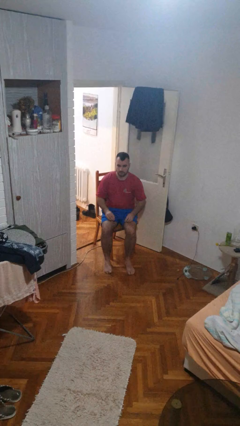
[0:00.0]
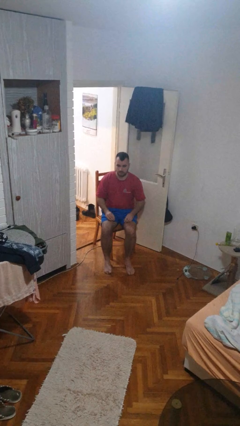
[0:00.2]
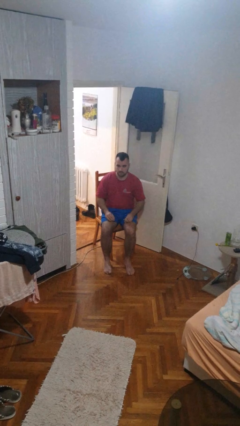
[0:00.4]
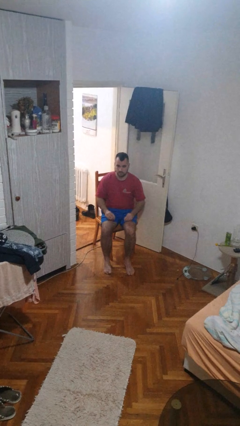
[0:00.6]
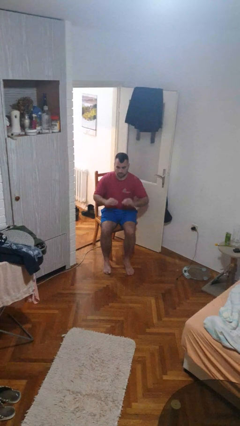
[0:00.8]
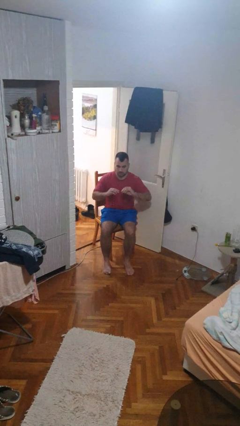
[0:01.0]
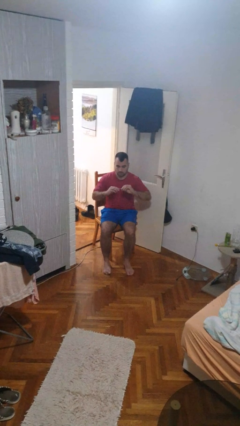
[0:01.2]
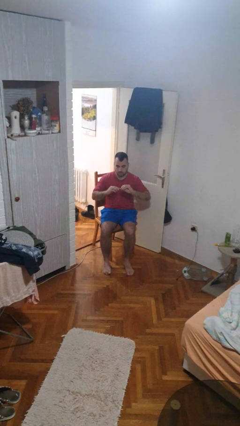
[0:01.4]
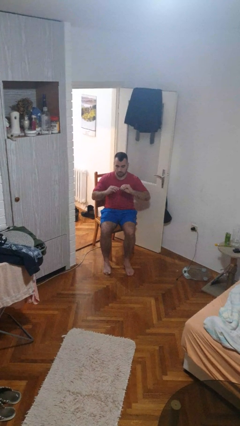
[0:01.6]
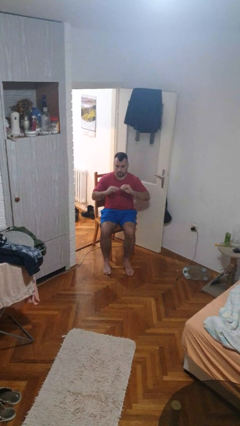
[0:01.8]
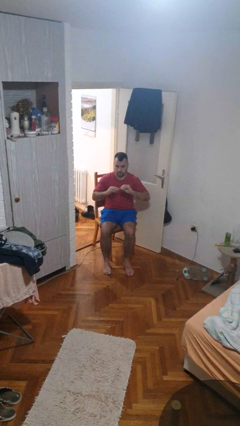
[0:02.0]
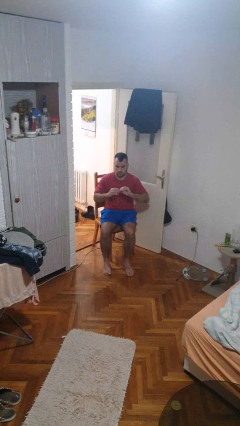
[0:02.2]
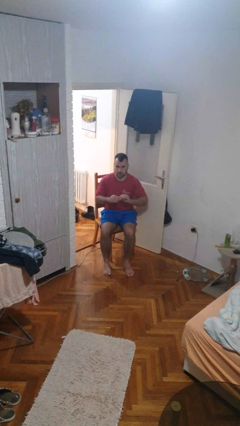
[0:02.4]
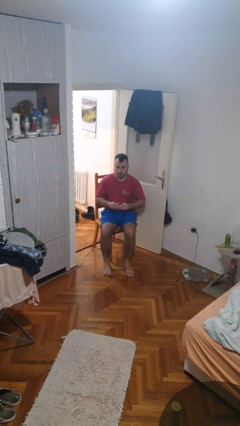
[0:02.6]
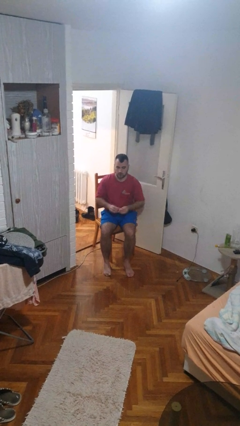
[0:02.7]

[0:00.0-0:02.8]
person clips fingernails

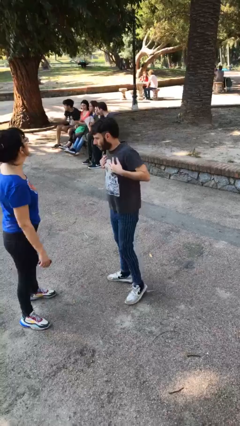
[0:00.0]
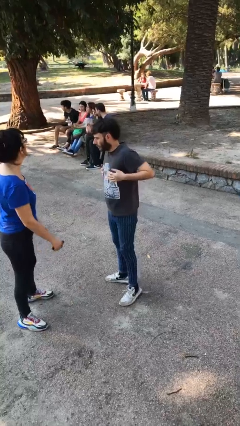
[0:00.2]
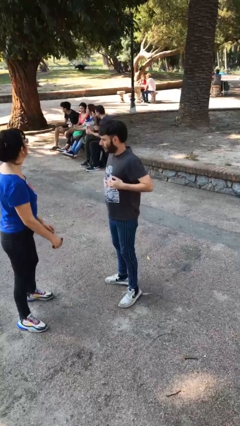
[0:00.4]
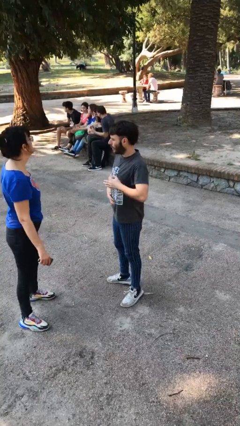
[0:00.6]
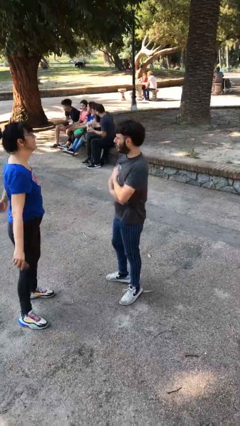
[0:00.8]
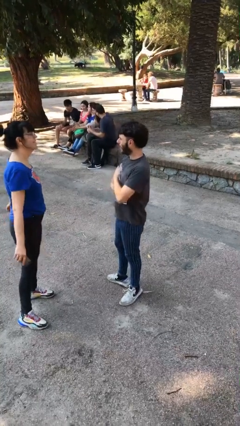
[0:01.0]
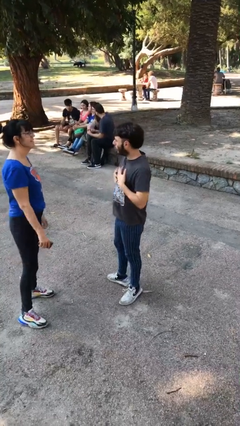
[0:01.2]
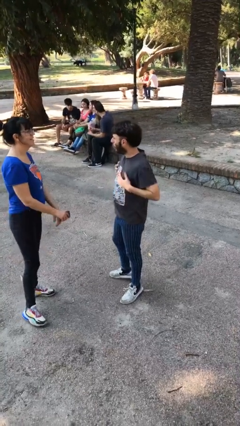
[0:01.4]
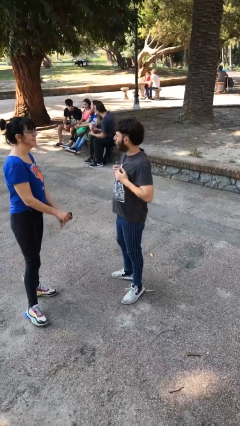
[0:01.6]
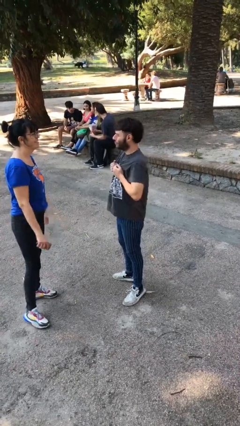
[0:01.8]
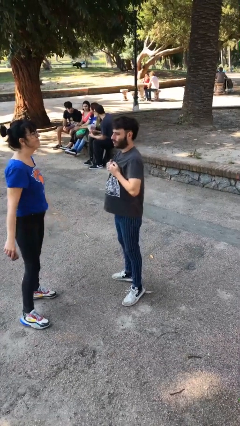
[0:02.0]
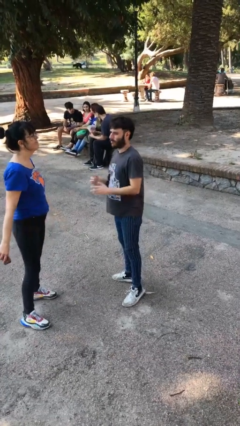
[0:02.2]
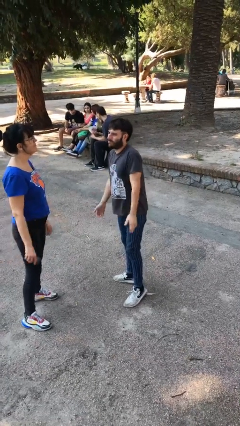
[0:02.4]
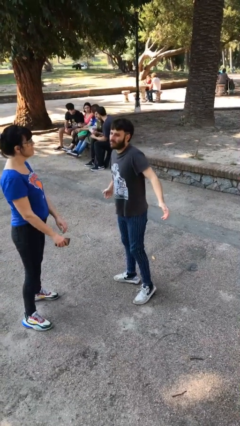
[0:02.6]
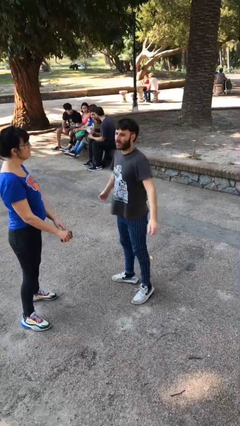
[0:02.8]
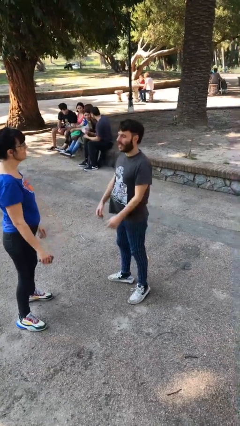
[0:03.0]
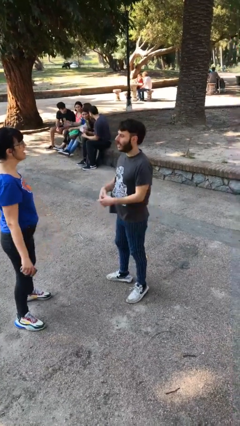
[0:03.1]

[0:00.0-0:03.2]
person talks to person

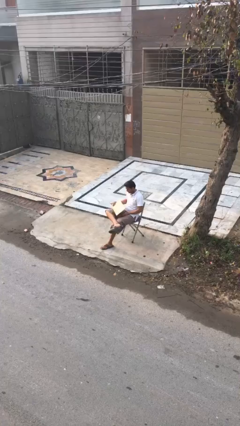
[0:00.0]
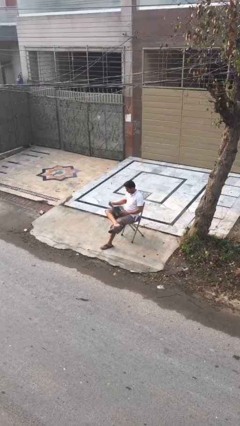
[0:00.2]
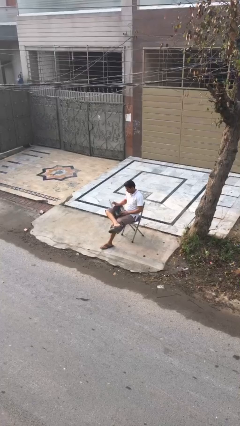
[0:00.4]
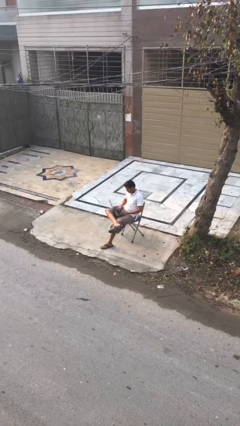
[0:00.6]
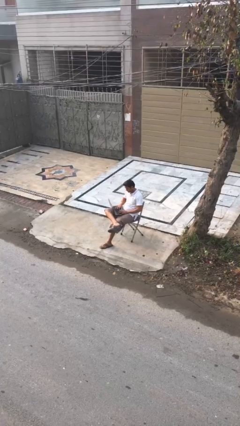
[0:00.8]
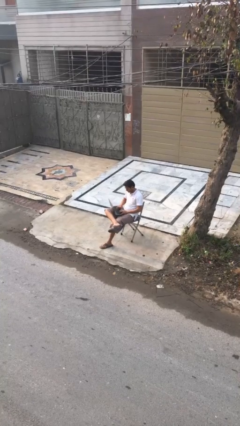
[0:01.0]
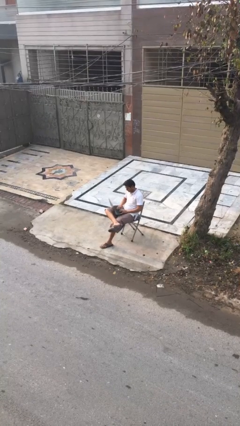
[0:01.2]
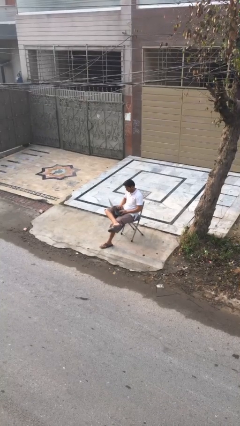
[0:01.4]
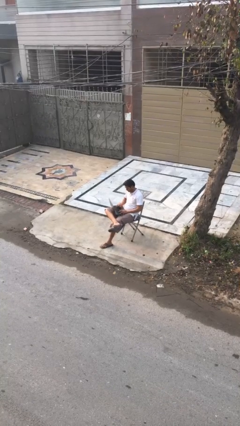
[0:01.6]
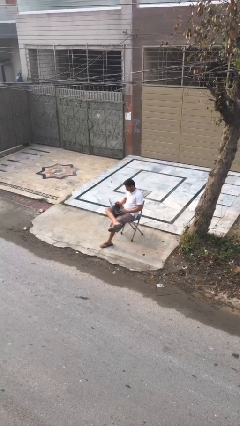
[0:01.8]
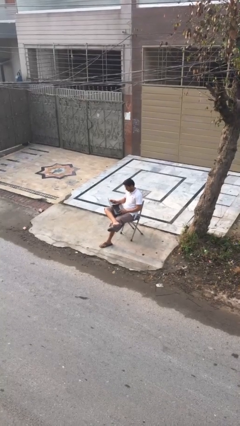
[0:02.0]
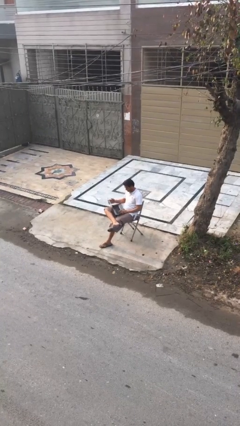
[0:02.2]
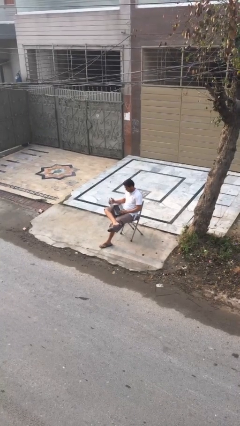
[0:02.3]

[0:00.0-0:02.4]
person interacts with laptop

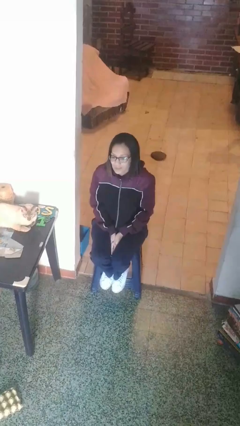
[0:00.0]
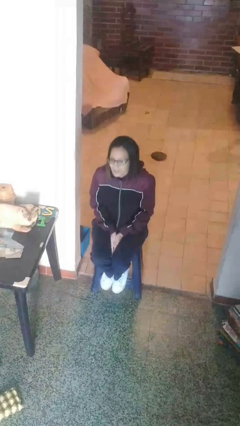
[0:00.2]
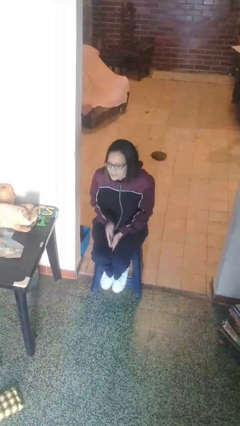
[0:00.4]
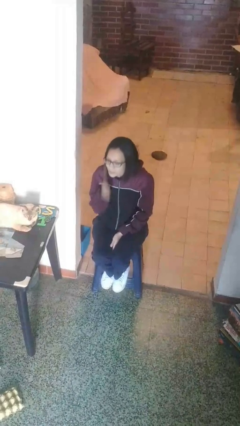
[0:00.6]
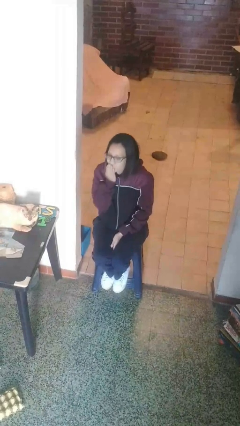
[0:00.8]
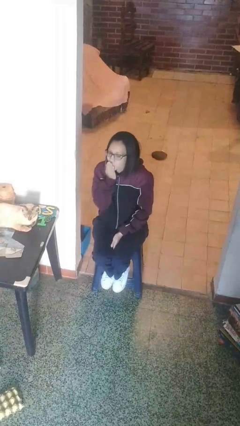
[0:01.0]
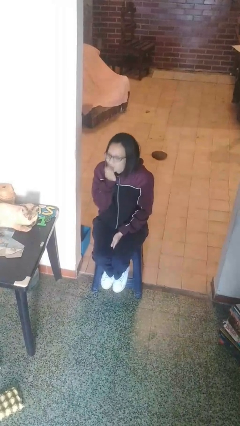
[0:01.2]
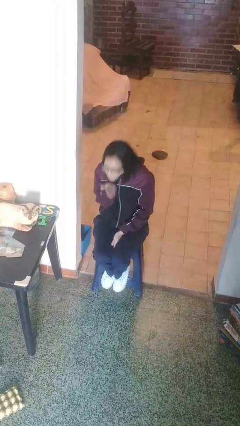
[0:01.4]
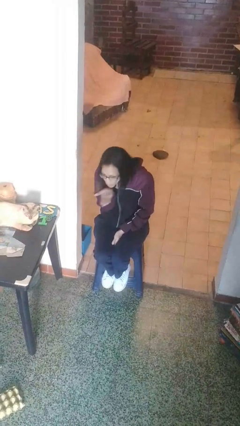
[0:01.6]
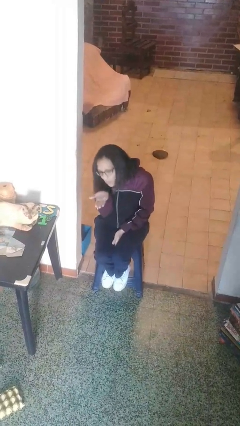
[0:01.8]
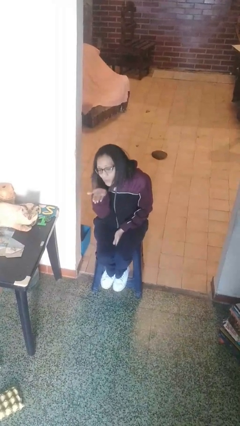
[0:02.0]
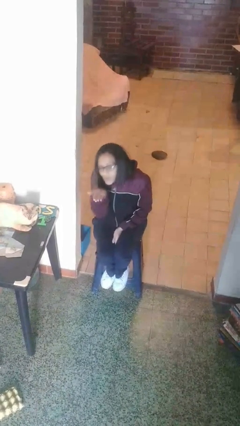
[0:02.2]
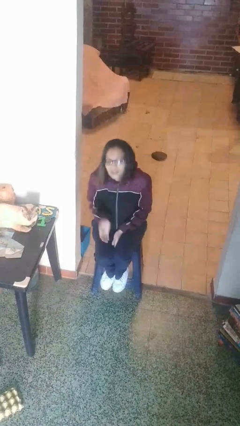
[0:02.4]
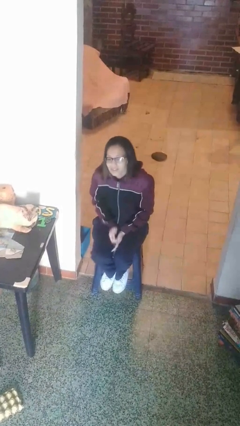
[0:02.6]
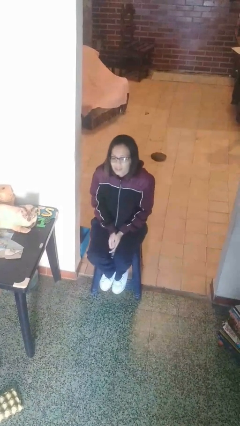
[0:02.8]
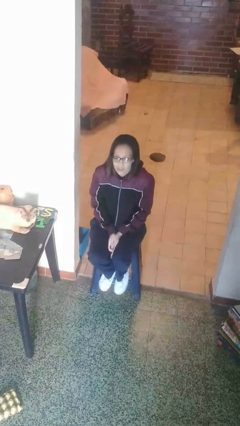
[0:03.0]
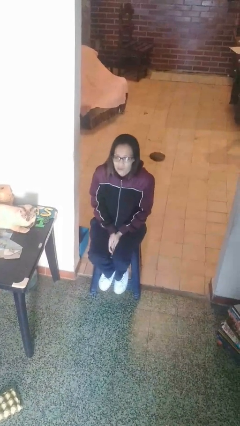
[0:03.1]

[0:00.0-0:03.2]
person gestures blow kiss

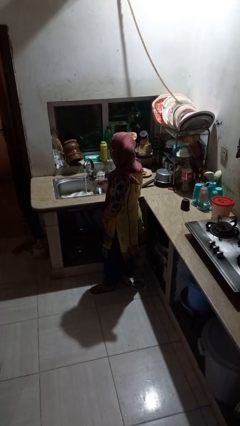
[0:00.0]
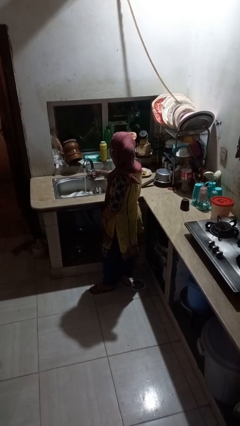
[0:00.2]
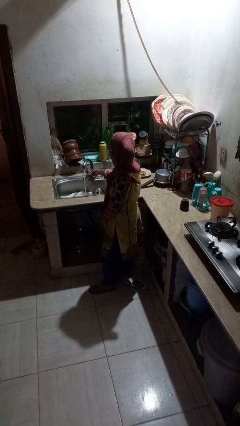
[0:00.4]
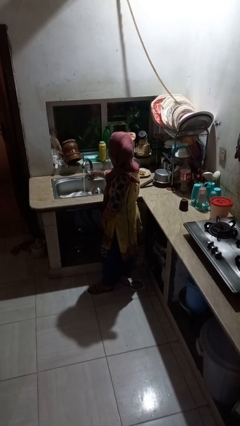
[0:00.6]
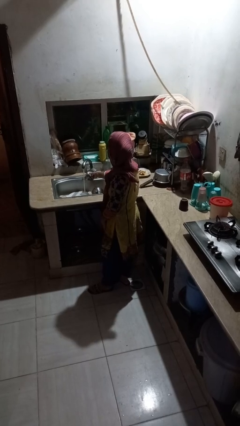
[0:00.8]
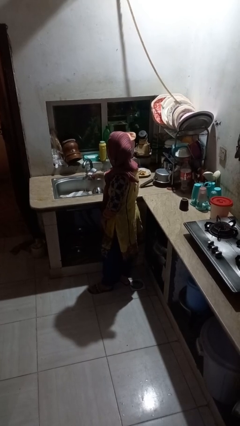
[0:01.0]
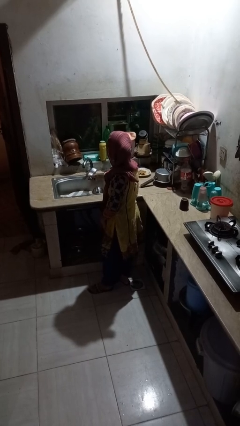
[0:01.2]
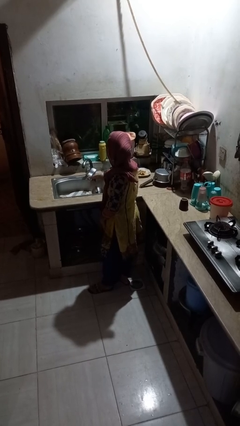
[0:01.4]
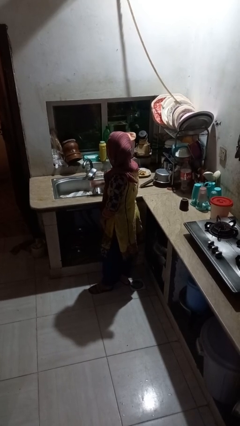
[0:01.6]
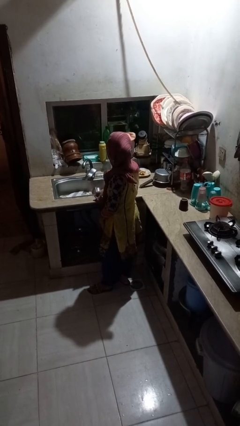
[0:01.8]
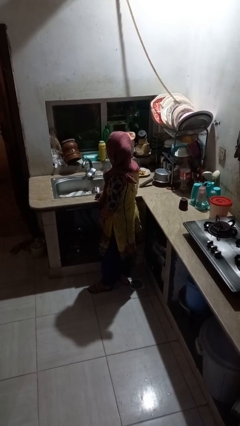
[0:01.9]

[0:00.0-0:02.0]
person turns off faucet

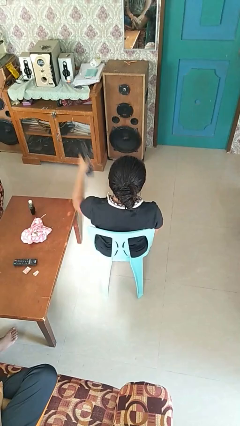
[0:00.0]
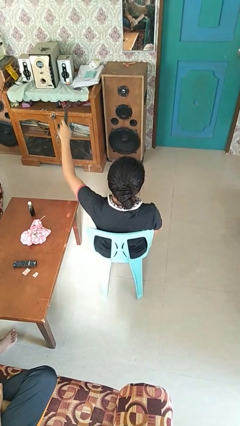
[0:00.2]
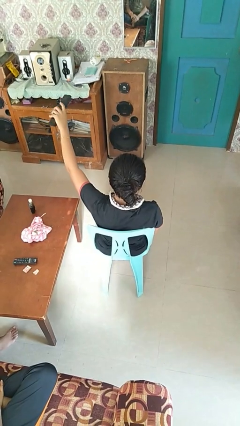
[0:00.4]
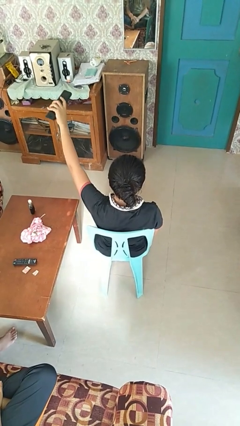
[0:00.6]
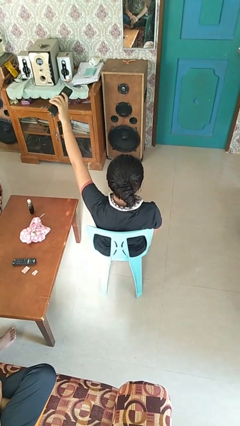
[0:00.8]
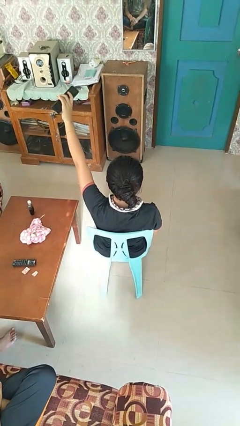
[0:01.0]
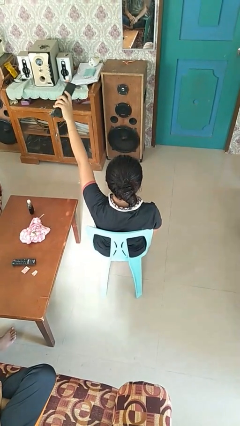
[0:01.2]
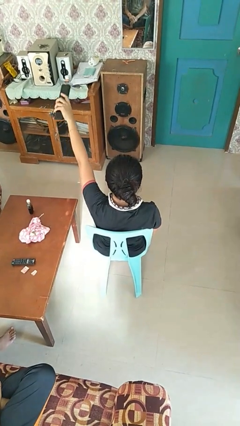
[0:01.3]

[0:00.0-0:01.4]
person uses television remote

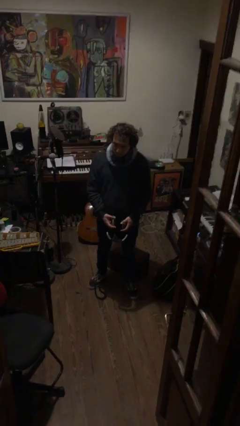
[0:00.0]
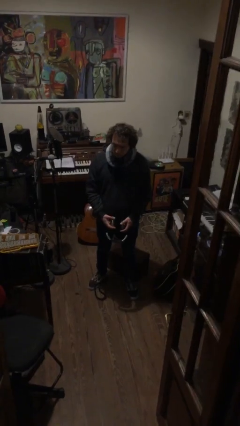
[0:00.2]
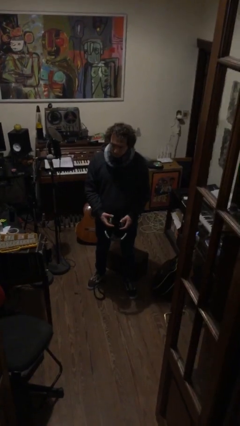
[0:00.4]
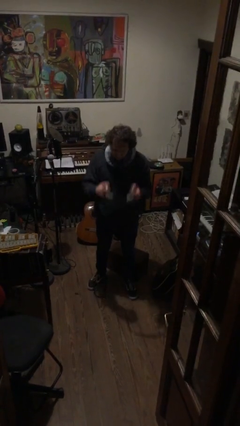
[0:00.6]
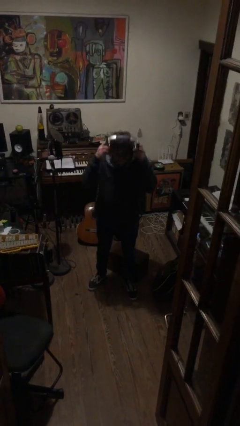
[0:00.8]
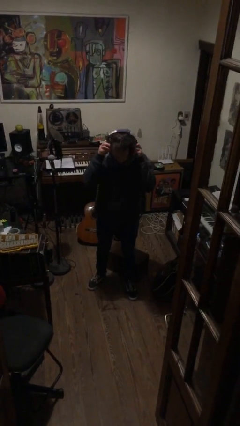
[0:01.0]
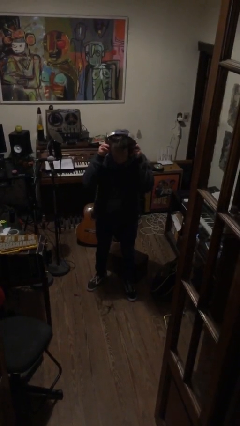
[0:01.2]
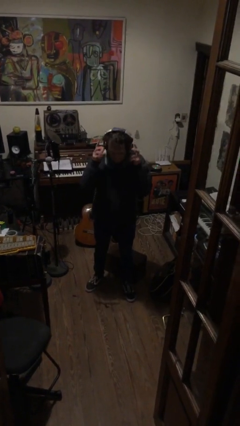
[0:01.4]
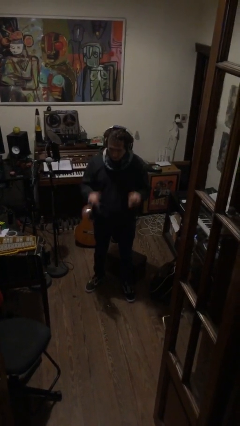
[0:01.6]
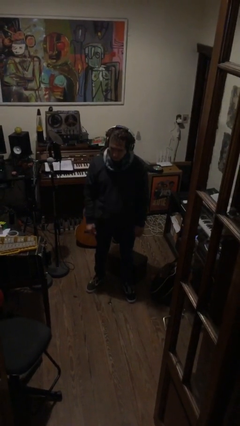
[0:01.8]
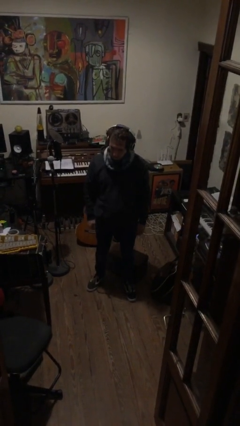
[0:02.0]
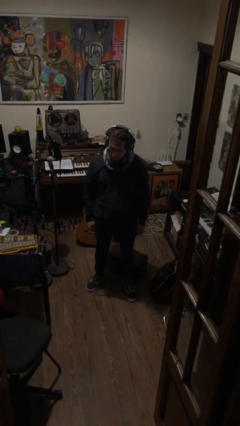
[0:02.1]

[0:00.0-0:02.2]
person puts on headphones
